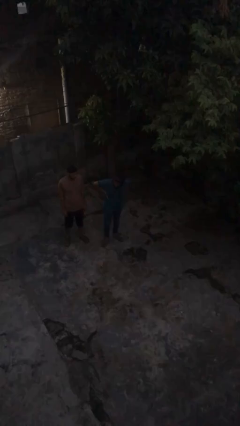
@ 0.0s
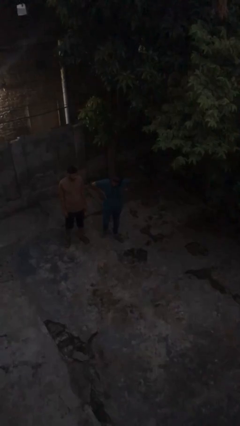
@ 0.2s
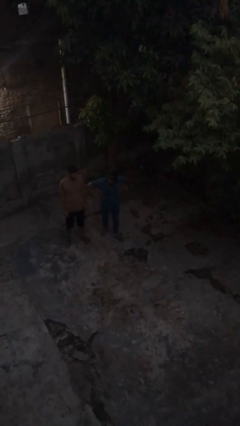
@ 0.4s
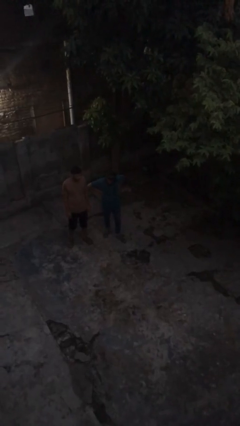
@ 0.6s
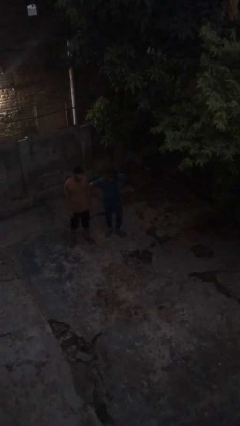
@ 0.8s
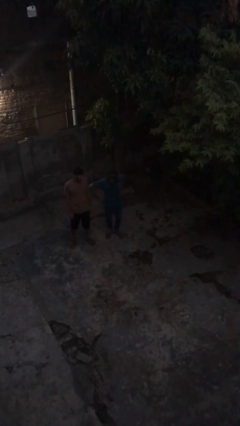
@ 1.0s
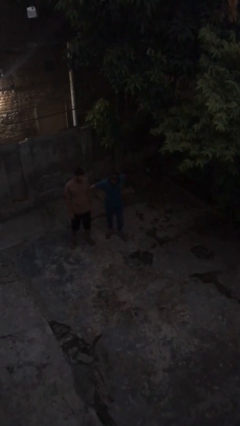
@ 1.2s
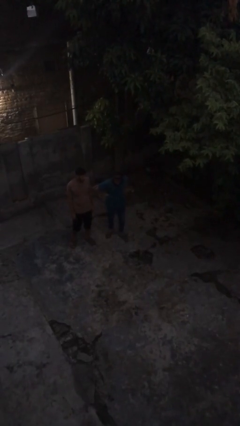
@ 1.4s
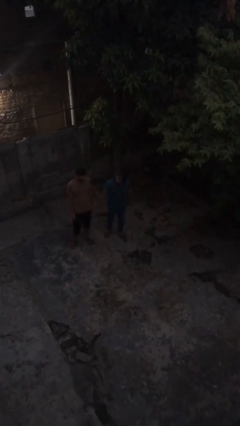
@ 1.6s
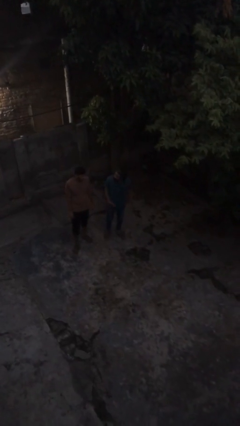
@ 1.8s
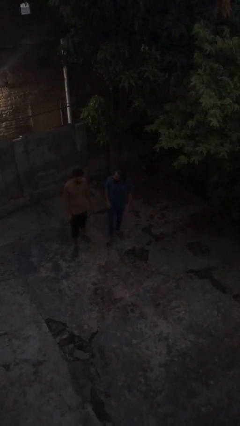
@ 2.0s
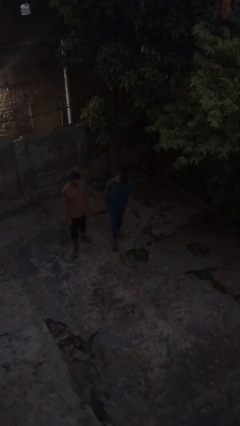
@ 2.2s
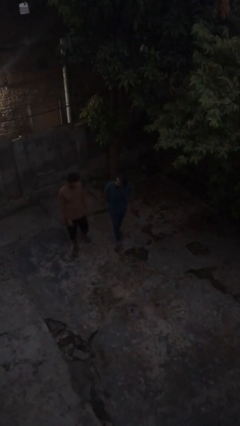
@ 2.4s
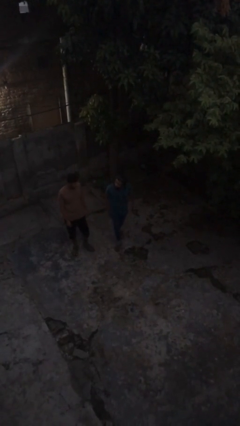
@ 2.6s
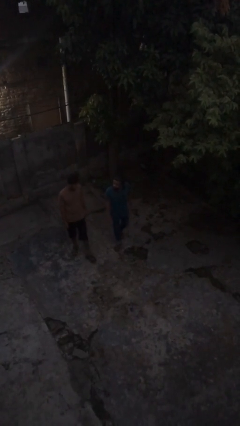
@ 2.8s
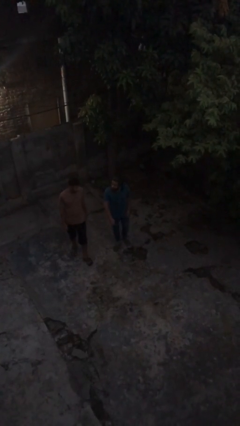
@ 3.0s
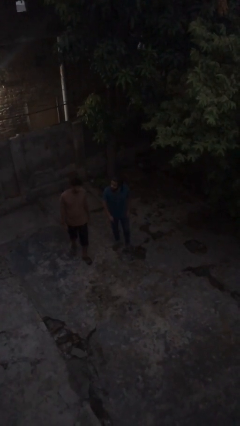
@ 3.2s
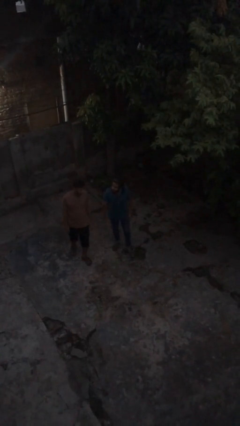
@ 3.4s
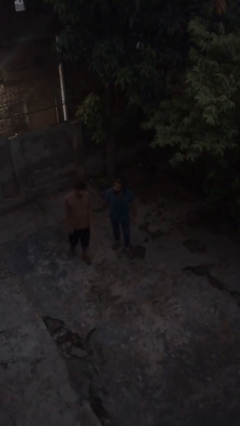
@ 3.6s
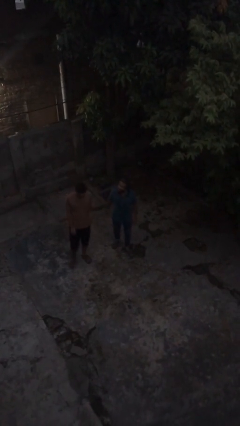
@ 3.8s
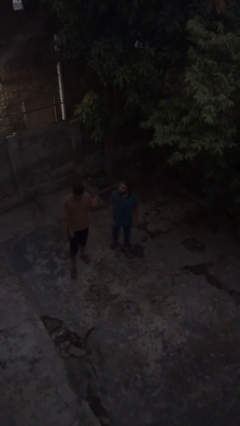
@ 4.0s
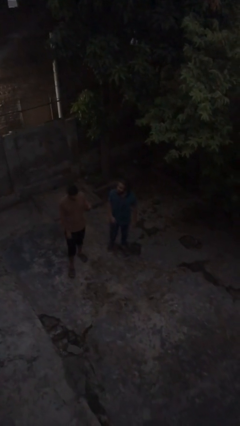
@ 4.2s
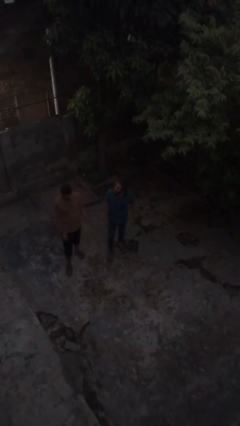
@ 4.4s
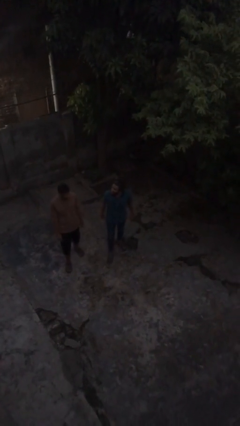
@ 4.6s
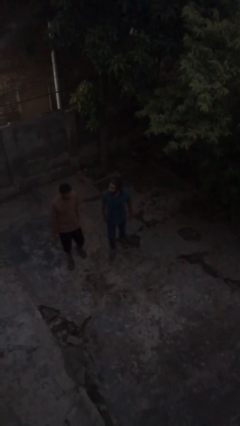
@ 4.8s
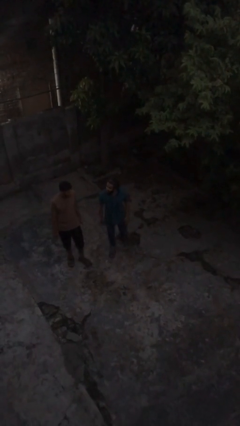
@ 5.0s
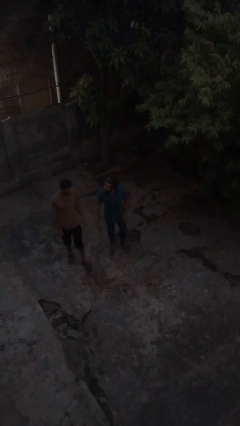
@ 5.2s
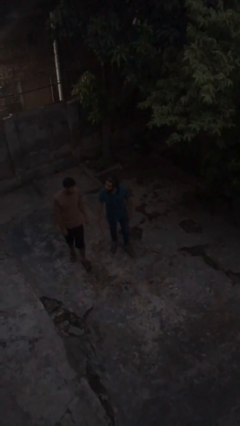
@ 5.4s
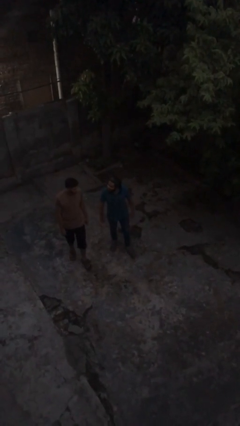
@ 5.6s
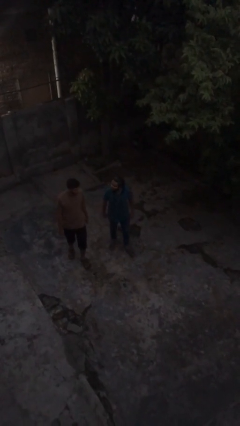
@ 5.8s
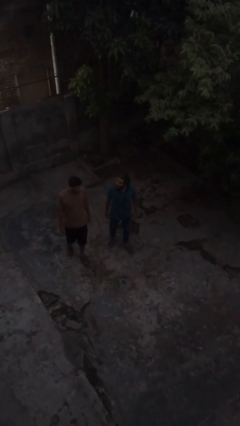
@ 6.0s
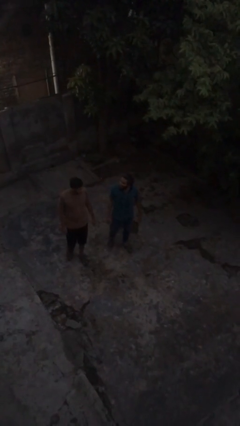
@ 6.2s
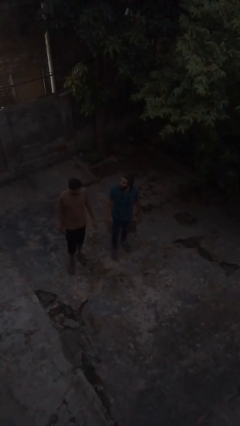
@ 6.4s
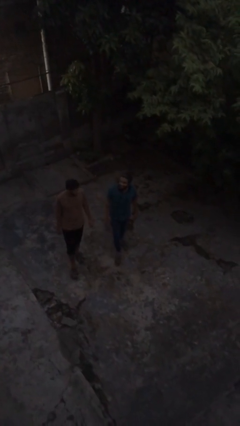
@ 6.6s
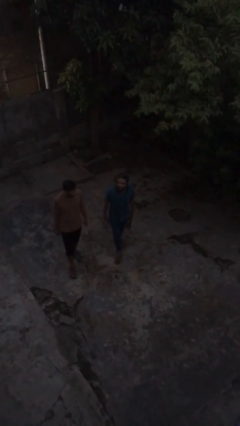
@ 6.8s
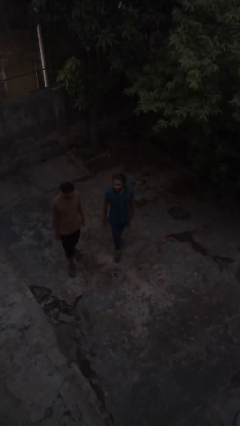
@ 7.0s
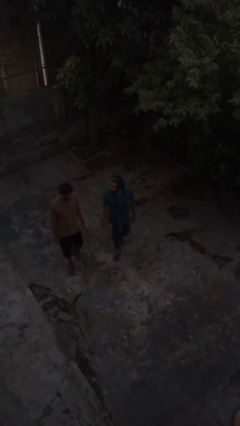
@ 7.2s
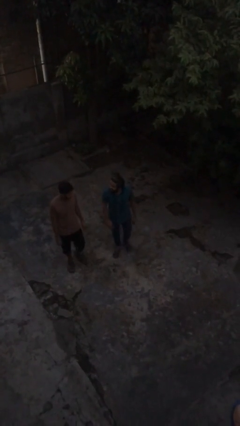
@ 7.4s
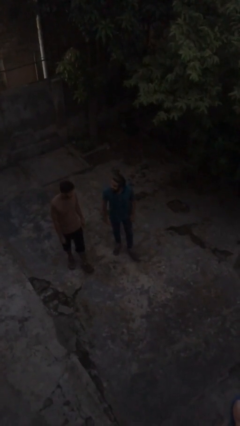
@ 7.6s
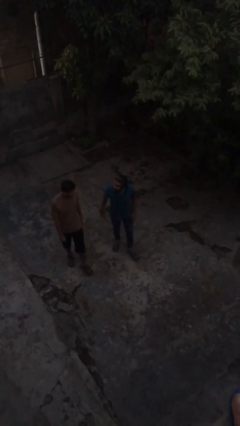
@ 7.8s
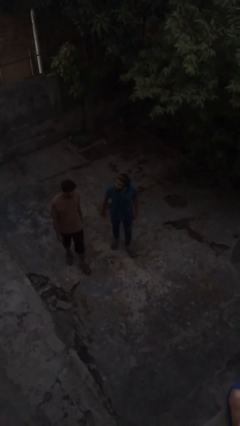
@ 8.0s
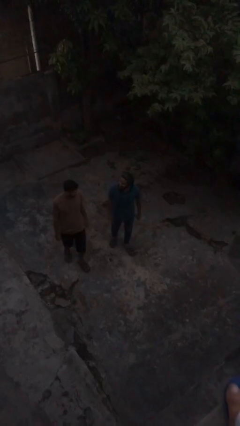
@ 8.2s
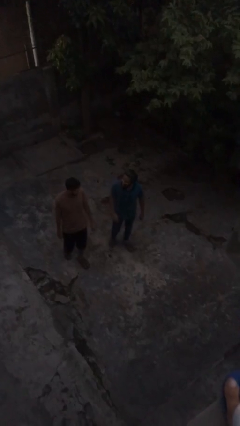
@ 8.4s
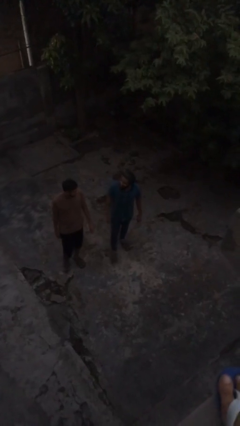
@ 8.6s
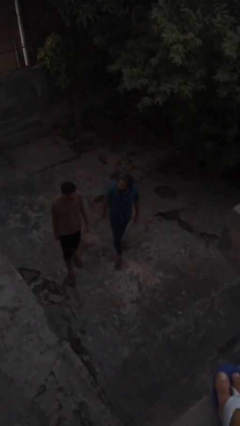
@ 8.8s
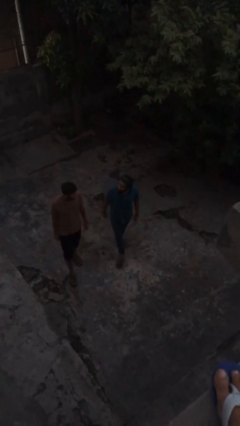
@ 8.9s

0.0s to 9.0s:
person talks to person

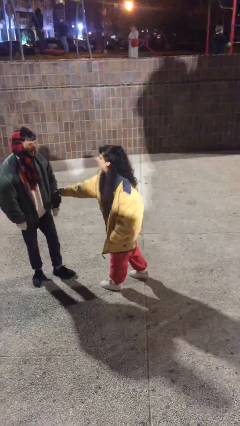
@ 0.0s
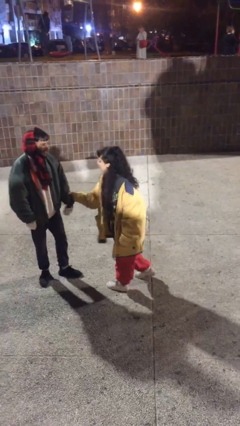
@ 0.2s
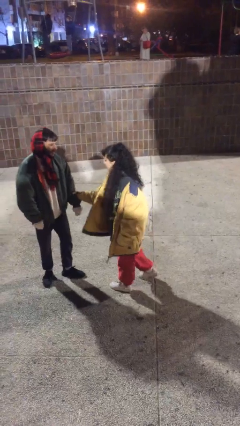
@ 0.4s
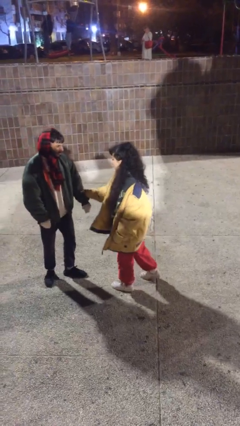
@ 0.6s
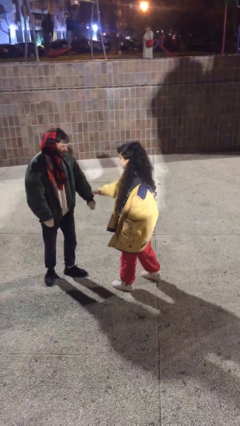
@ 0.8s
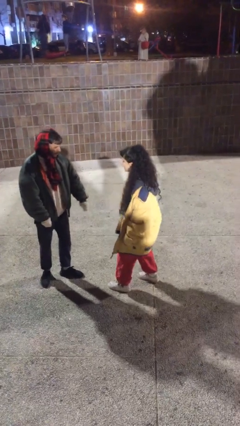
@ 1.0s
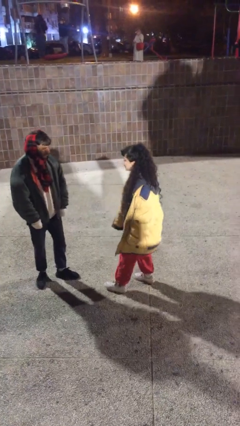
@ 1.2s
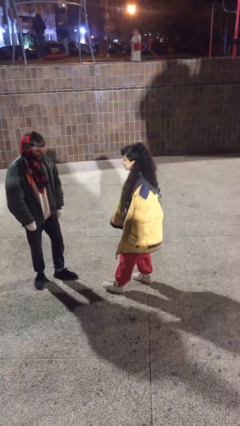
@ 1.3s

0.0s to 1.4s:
person grabs person by forearm

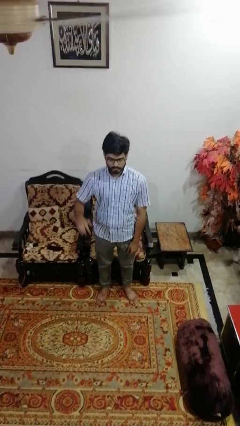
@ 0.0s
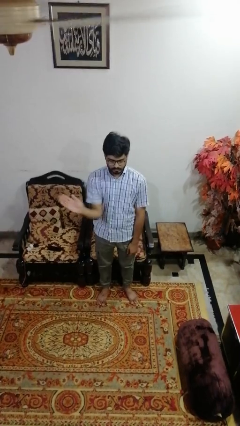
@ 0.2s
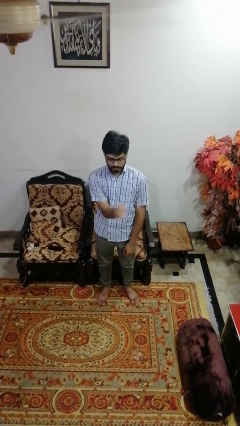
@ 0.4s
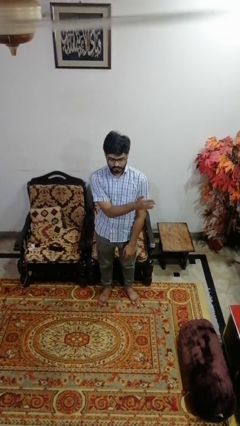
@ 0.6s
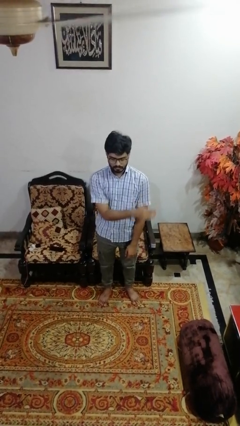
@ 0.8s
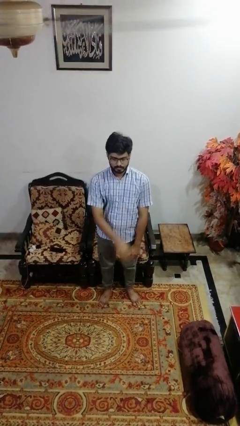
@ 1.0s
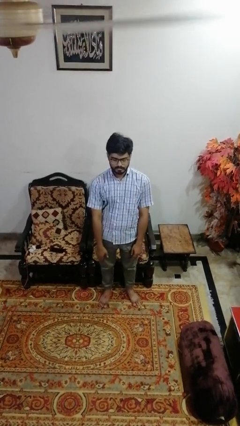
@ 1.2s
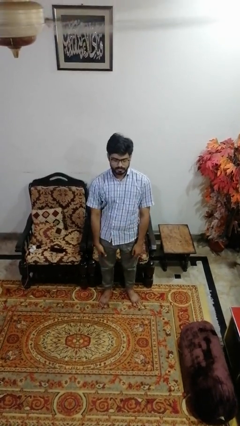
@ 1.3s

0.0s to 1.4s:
person gestures swipe left

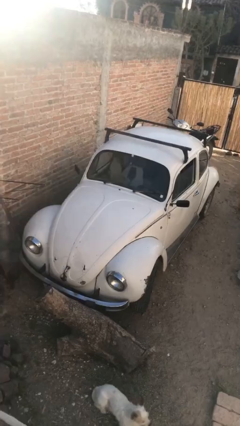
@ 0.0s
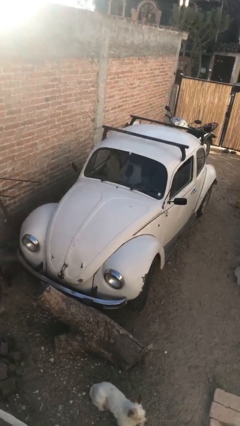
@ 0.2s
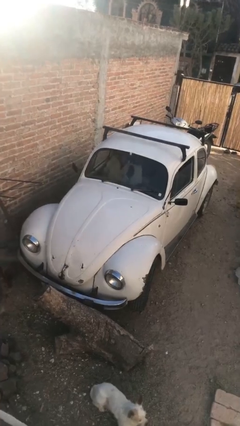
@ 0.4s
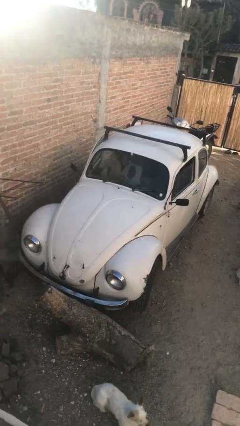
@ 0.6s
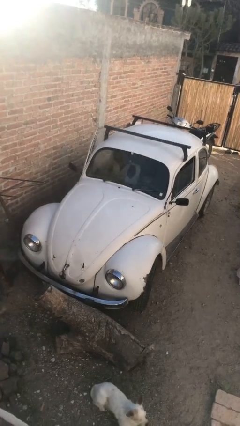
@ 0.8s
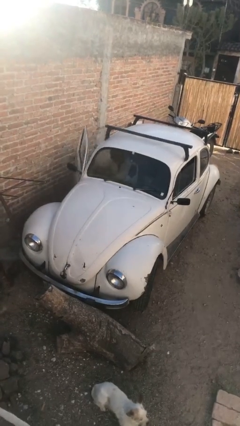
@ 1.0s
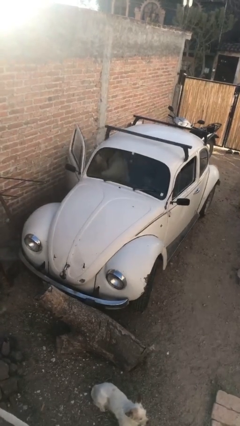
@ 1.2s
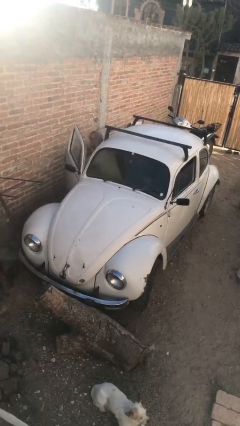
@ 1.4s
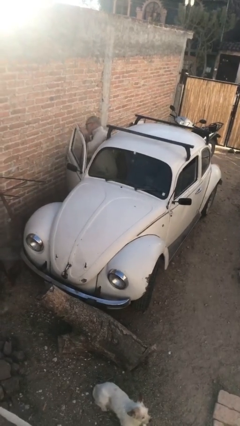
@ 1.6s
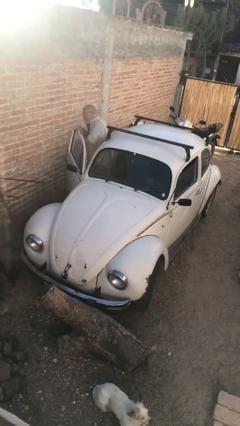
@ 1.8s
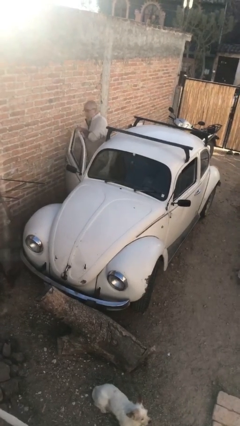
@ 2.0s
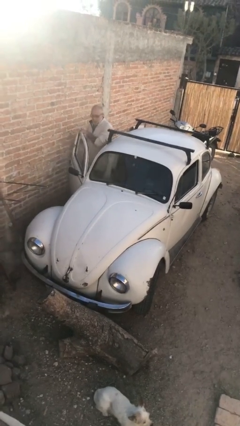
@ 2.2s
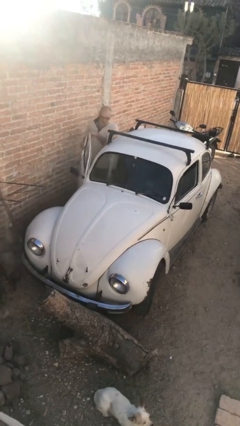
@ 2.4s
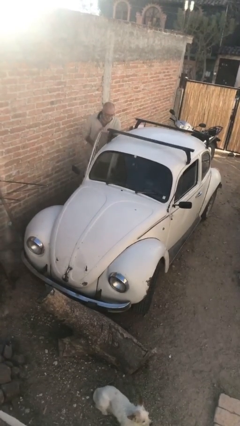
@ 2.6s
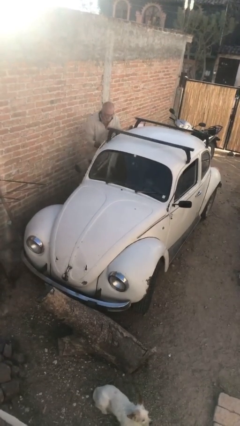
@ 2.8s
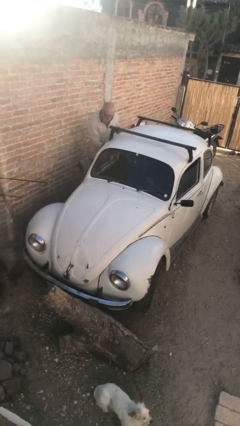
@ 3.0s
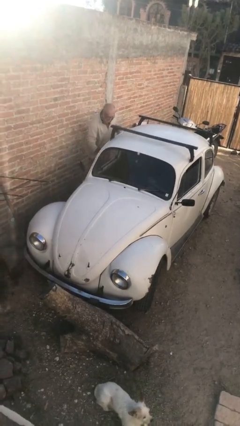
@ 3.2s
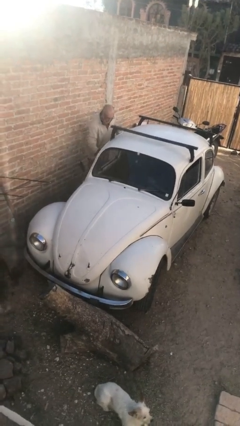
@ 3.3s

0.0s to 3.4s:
car drops off person

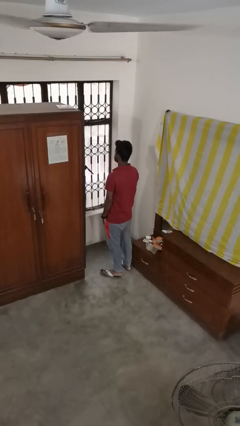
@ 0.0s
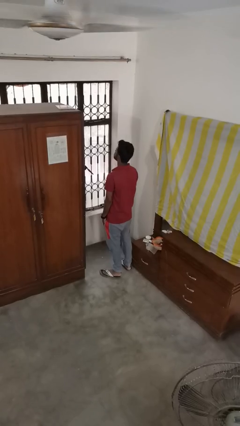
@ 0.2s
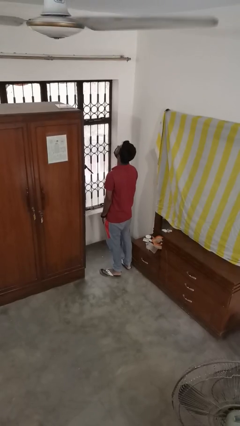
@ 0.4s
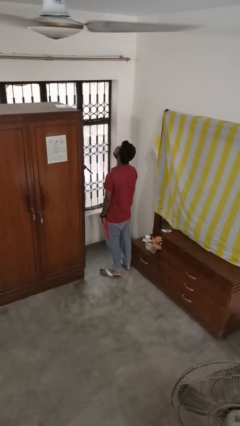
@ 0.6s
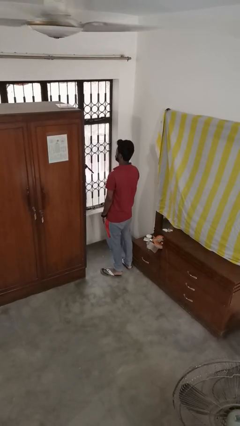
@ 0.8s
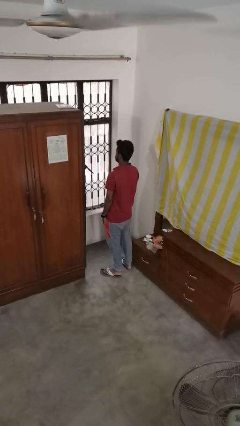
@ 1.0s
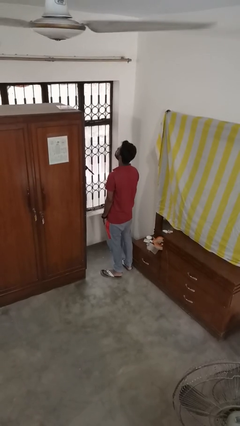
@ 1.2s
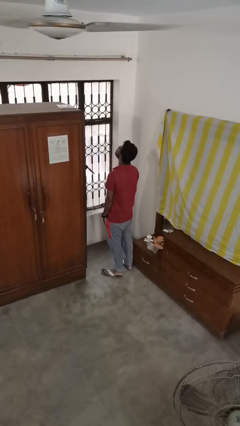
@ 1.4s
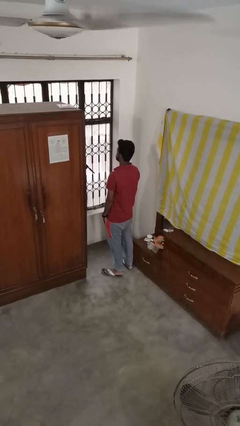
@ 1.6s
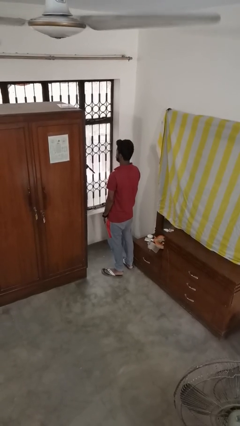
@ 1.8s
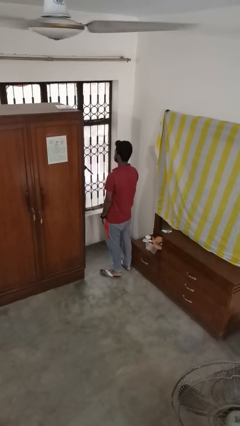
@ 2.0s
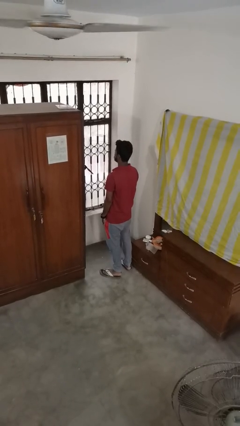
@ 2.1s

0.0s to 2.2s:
person nods head

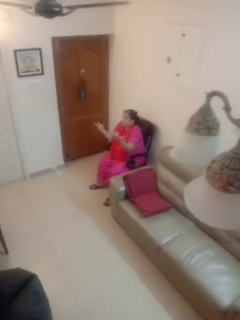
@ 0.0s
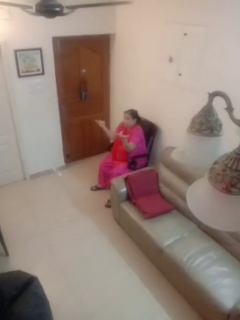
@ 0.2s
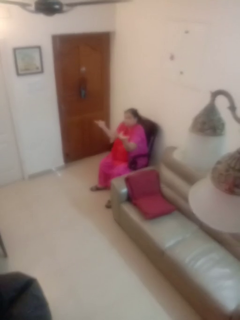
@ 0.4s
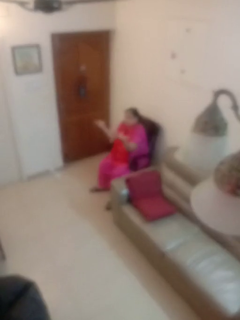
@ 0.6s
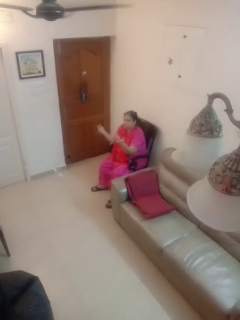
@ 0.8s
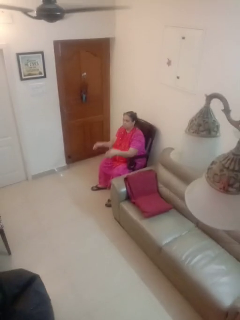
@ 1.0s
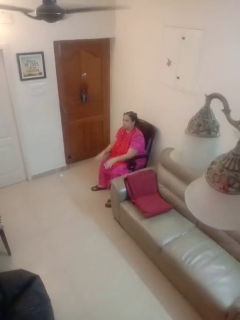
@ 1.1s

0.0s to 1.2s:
person shrugs
